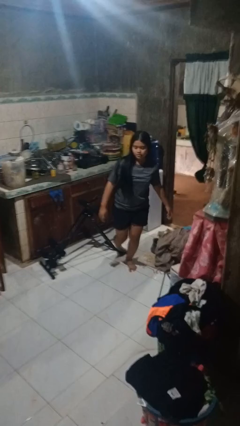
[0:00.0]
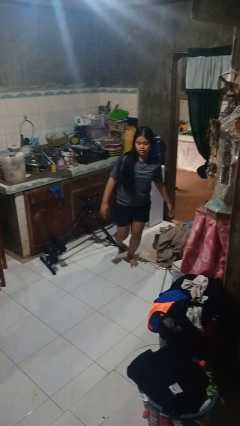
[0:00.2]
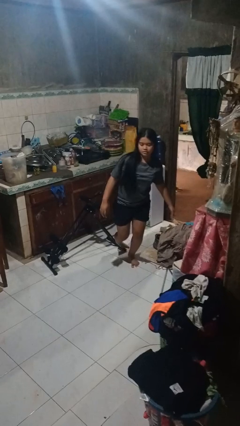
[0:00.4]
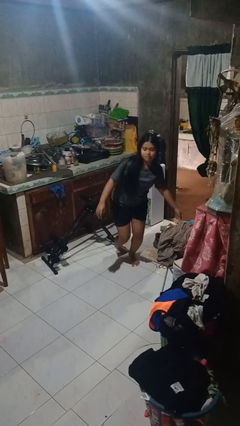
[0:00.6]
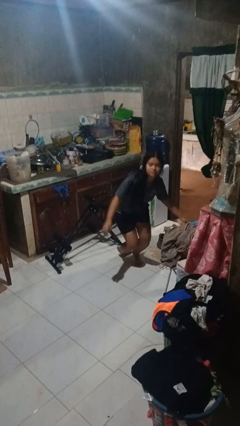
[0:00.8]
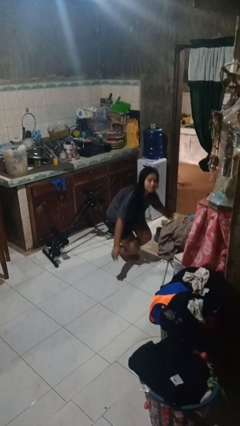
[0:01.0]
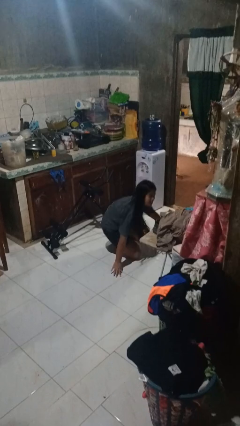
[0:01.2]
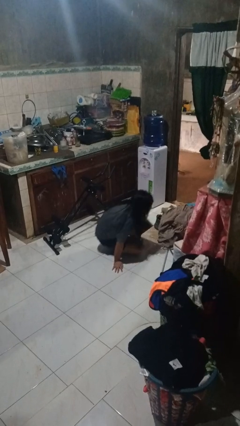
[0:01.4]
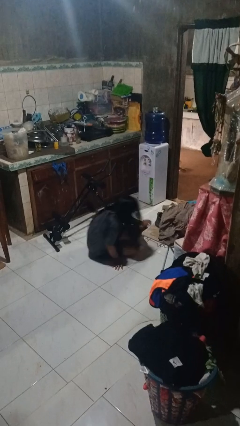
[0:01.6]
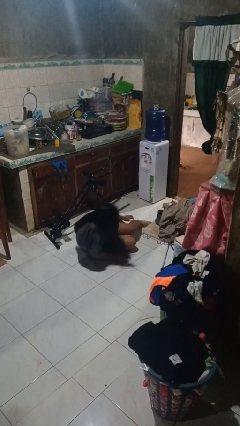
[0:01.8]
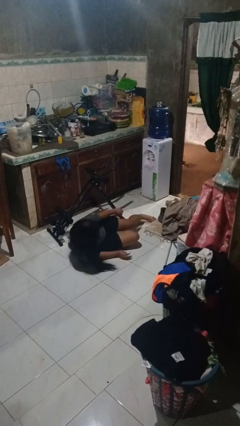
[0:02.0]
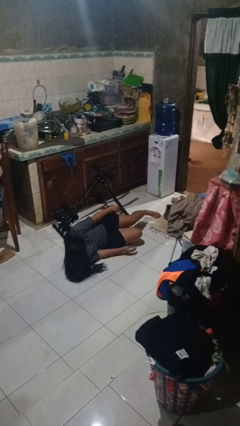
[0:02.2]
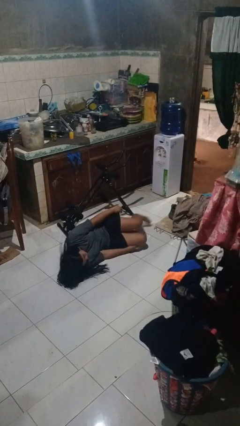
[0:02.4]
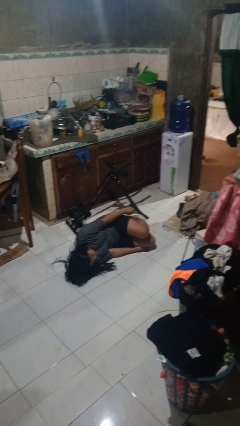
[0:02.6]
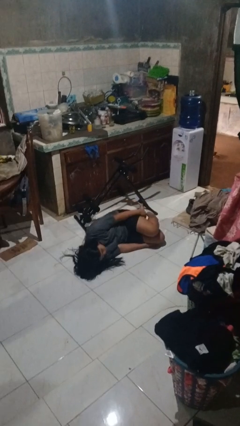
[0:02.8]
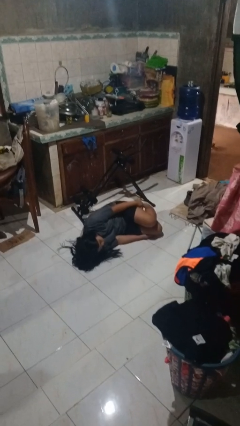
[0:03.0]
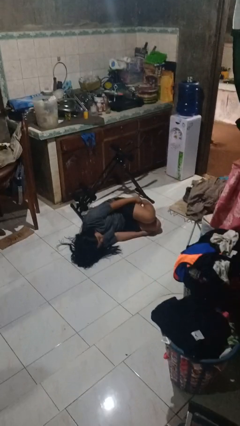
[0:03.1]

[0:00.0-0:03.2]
person lies down on floor

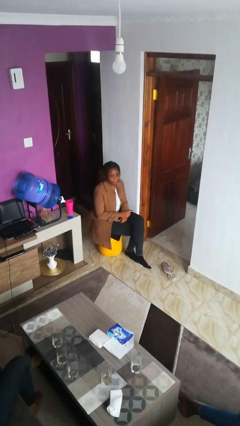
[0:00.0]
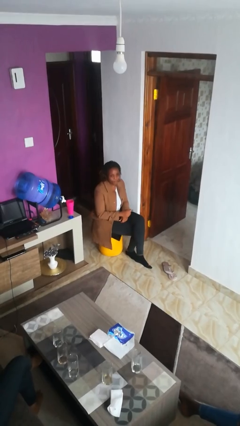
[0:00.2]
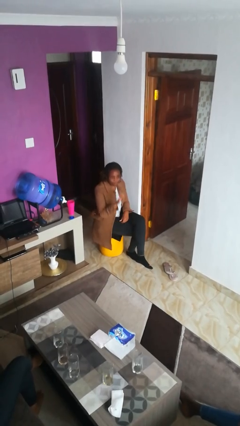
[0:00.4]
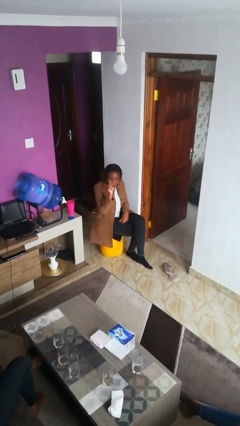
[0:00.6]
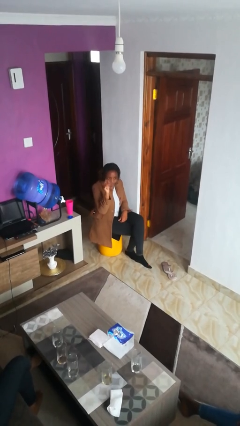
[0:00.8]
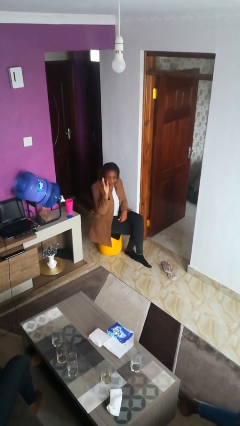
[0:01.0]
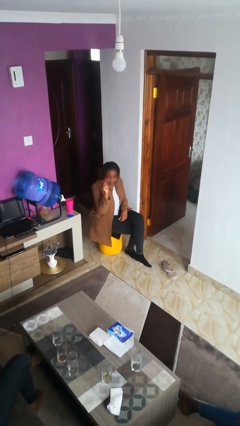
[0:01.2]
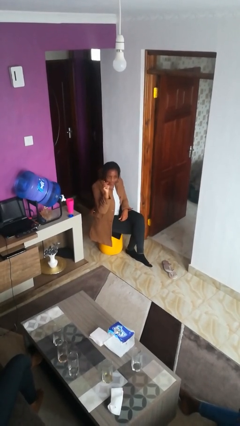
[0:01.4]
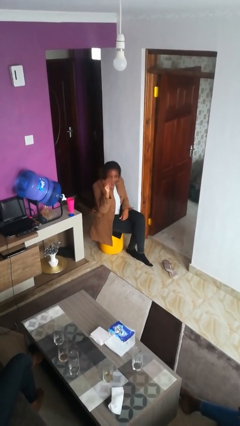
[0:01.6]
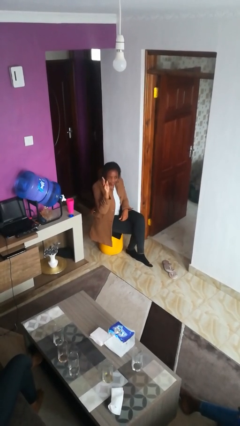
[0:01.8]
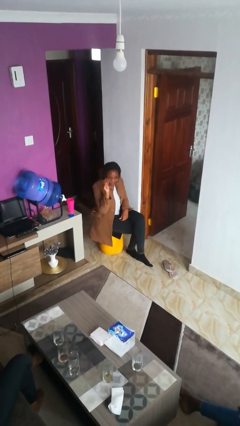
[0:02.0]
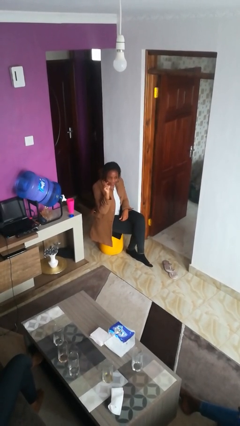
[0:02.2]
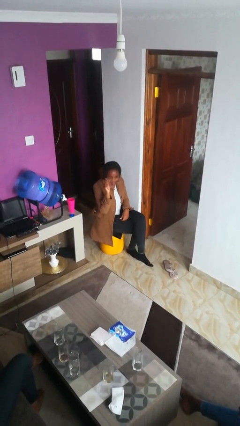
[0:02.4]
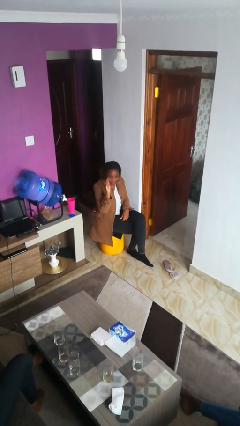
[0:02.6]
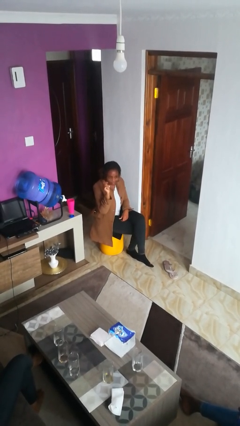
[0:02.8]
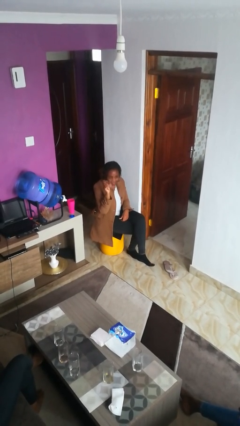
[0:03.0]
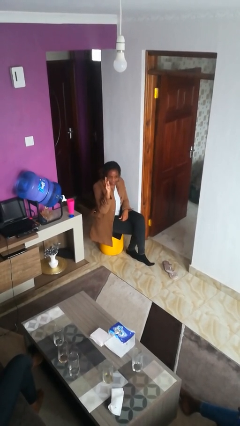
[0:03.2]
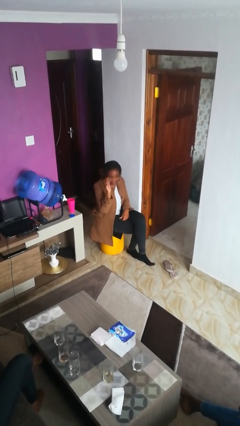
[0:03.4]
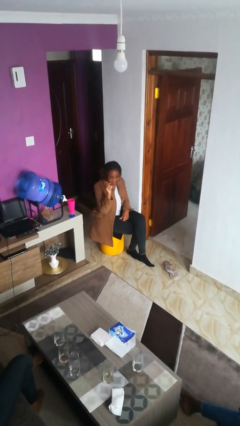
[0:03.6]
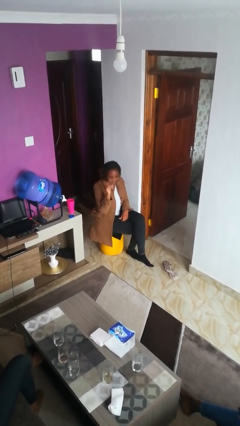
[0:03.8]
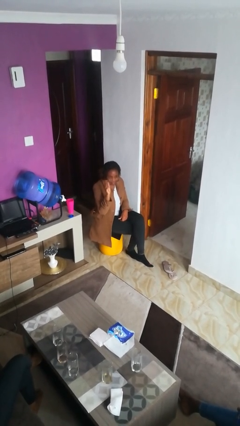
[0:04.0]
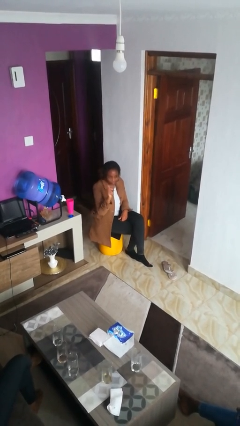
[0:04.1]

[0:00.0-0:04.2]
person gestures come here

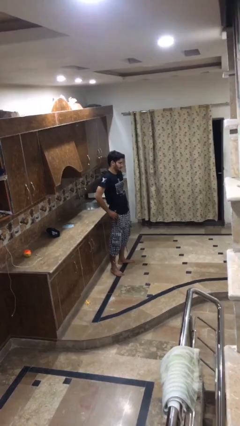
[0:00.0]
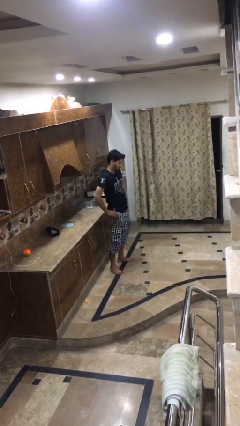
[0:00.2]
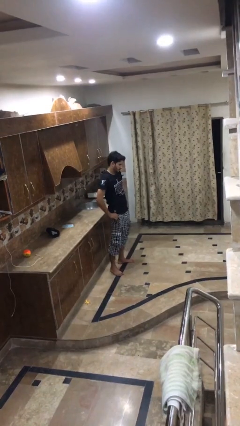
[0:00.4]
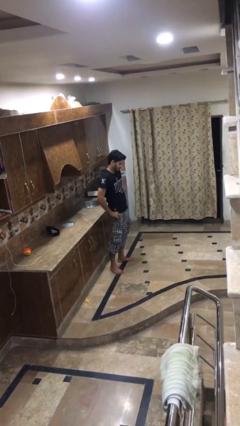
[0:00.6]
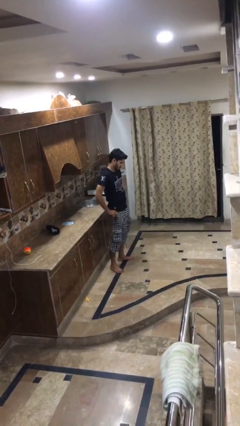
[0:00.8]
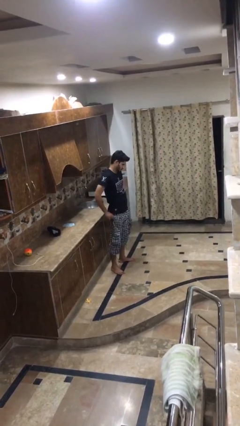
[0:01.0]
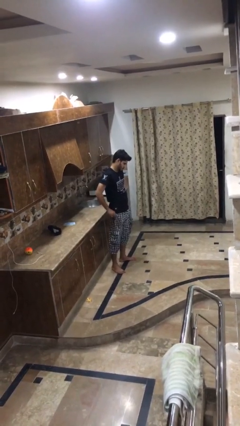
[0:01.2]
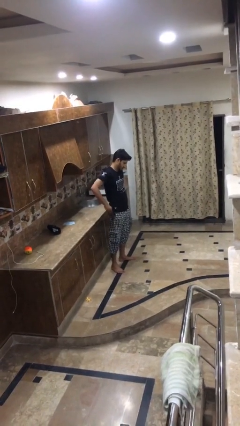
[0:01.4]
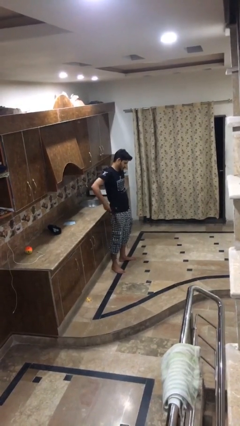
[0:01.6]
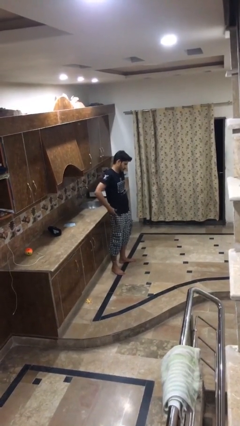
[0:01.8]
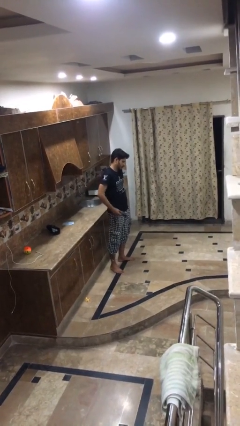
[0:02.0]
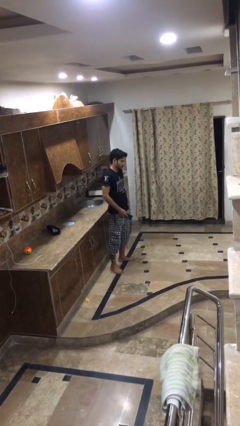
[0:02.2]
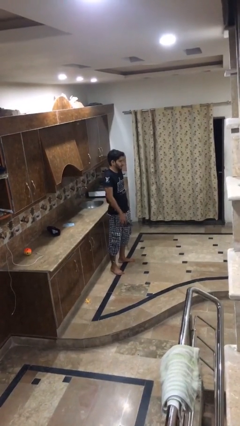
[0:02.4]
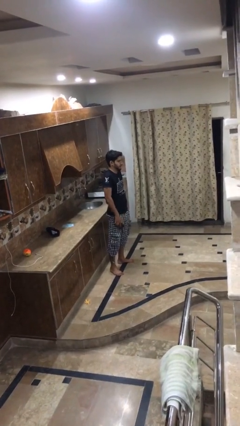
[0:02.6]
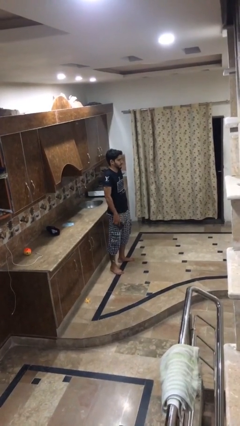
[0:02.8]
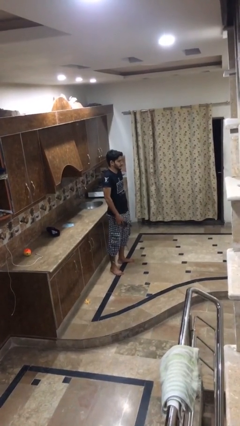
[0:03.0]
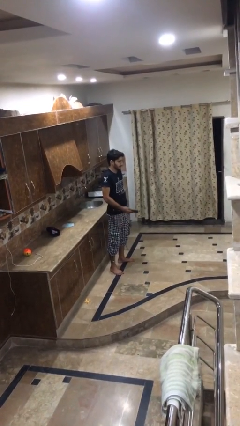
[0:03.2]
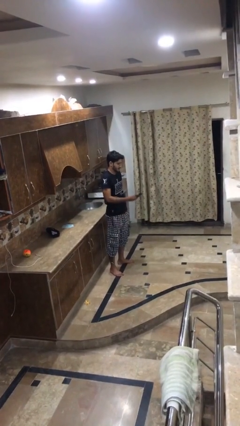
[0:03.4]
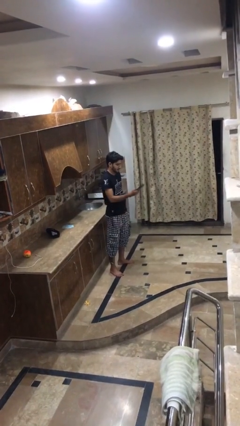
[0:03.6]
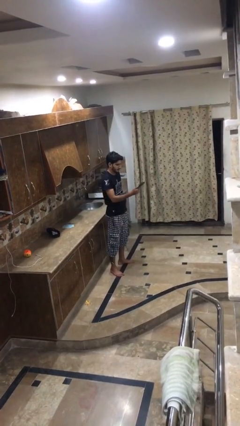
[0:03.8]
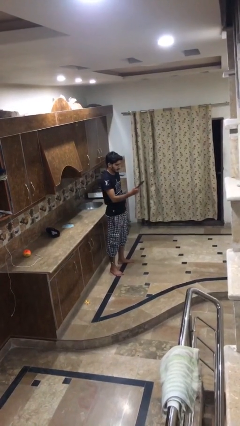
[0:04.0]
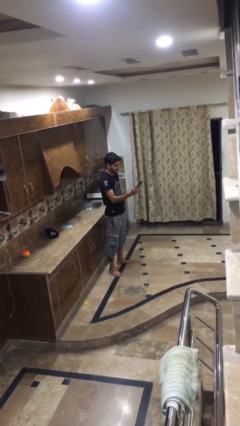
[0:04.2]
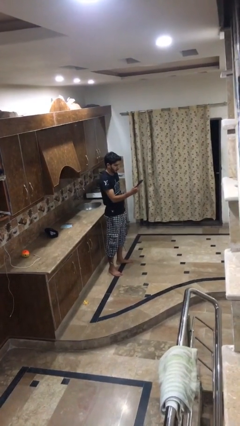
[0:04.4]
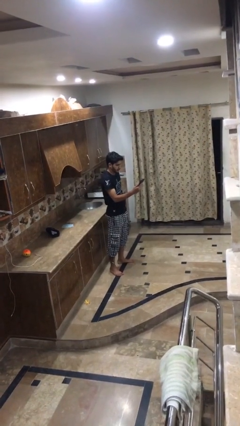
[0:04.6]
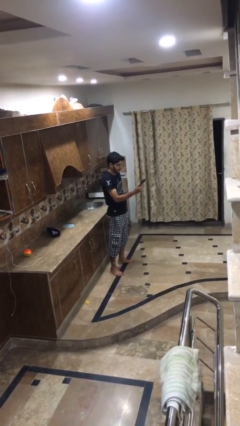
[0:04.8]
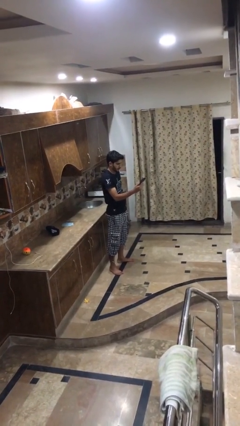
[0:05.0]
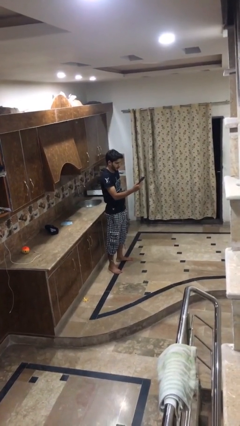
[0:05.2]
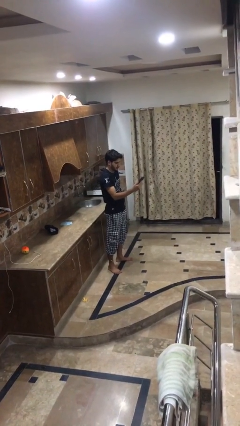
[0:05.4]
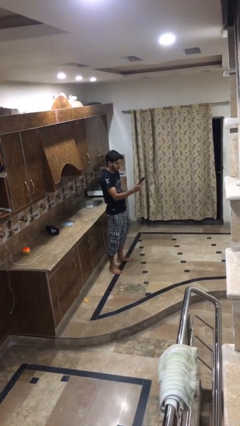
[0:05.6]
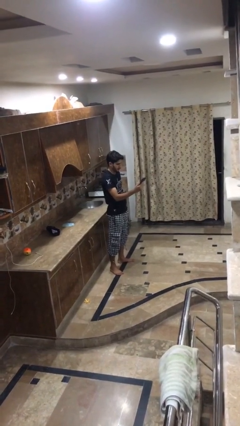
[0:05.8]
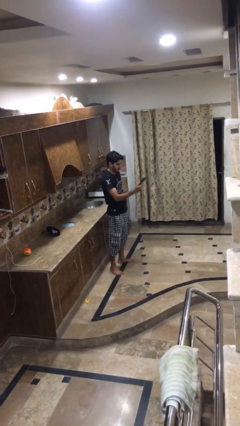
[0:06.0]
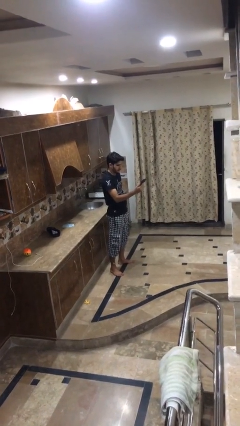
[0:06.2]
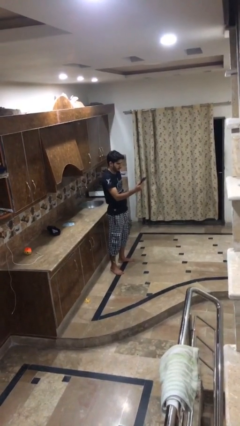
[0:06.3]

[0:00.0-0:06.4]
person takes phone from pocket

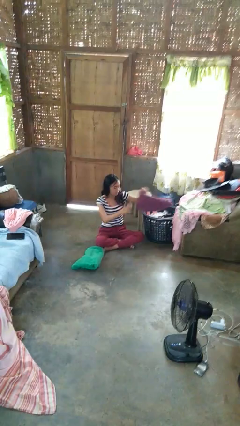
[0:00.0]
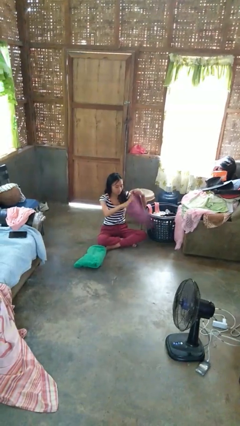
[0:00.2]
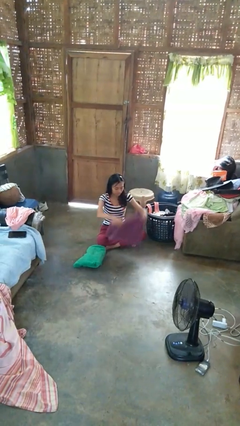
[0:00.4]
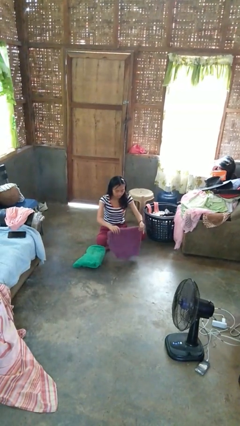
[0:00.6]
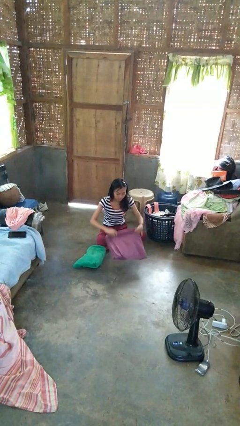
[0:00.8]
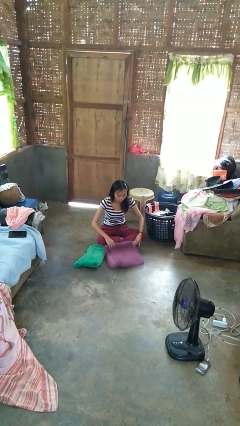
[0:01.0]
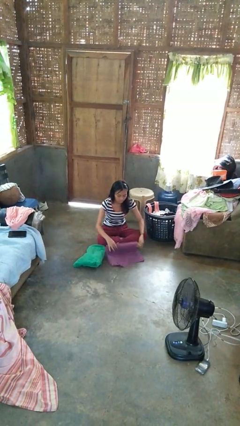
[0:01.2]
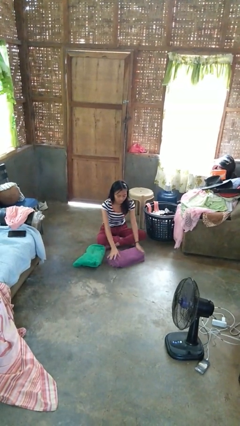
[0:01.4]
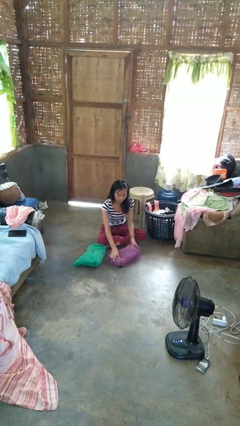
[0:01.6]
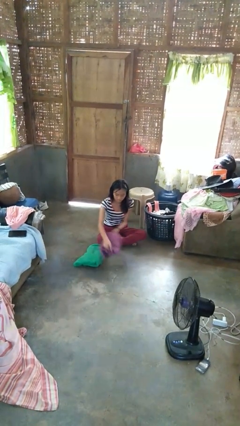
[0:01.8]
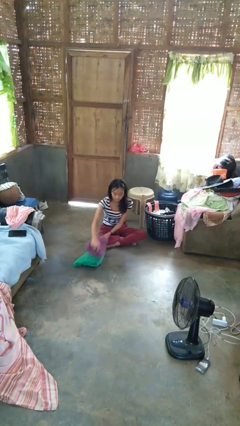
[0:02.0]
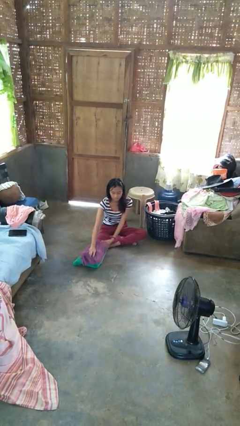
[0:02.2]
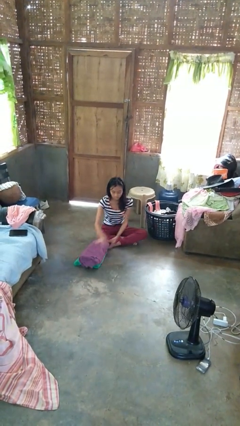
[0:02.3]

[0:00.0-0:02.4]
person folds towel

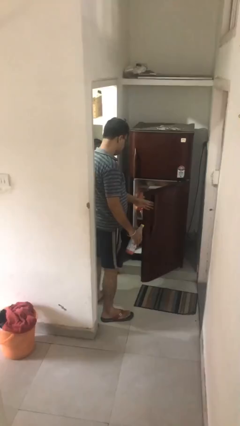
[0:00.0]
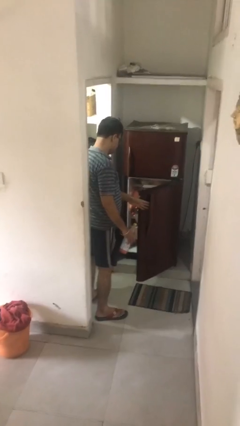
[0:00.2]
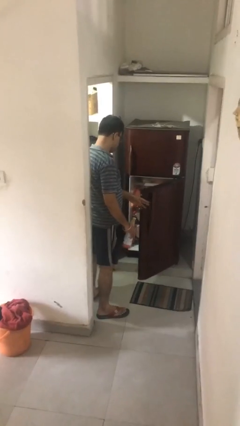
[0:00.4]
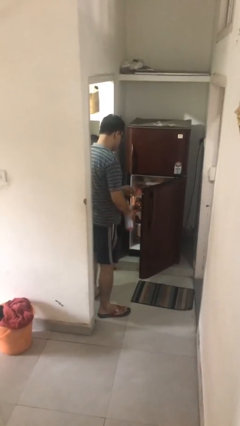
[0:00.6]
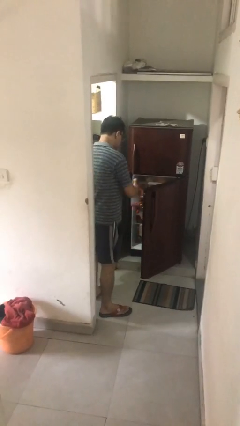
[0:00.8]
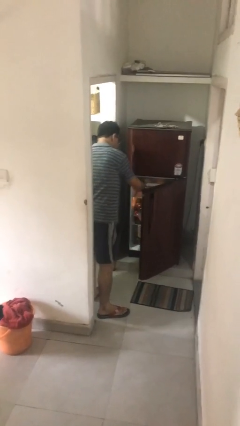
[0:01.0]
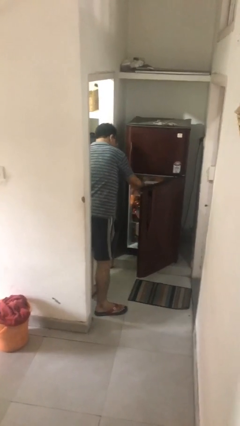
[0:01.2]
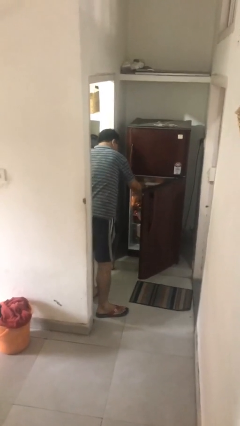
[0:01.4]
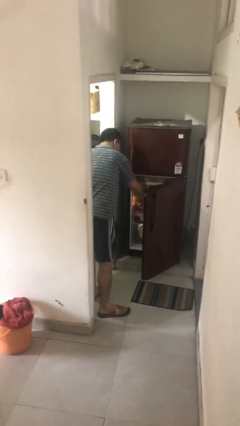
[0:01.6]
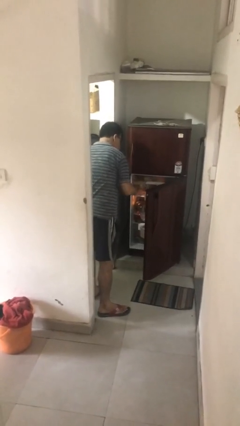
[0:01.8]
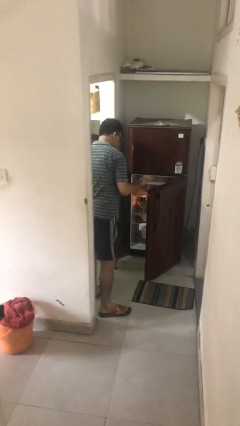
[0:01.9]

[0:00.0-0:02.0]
person puts object into refrigerator
